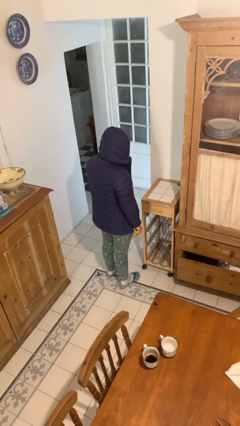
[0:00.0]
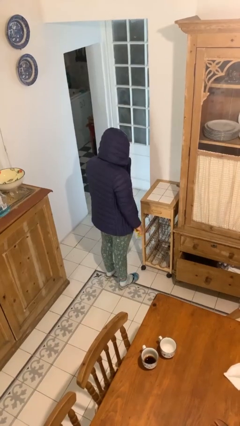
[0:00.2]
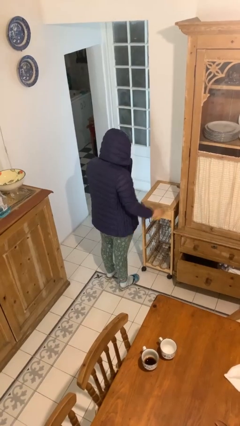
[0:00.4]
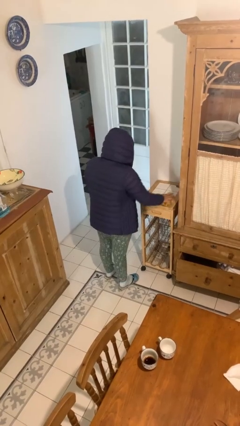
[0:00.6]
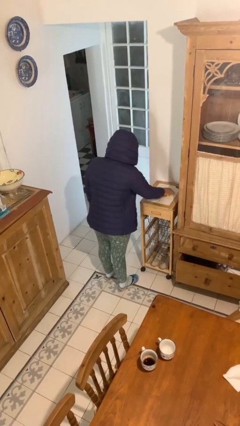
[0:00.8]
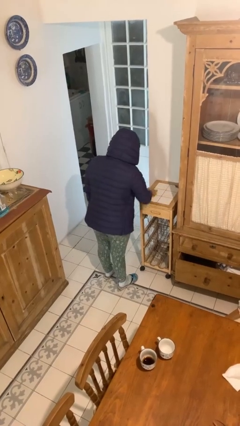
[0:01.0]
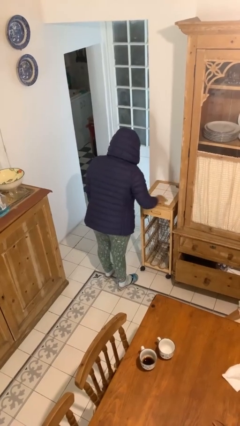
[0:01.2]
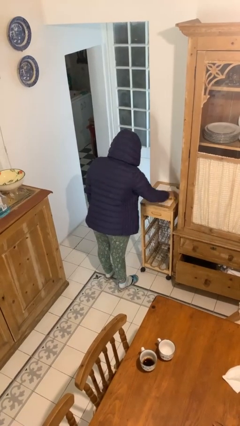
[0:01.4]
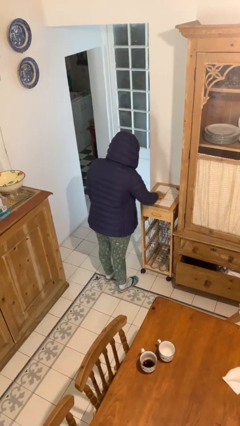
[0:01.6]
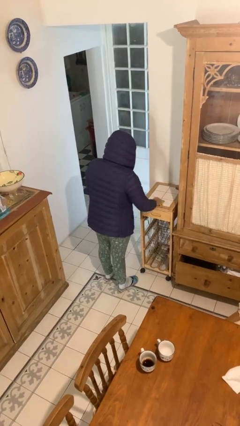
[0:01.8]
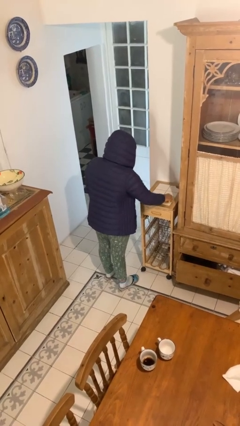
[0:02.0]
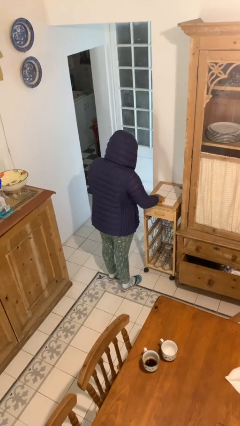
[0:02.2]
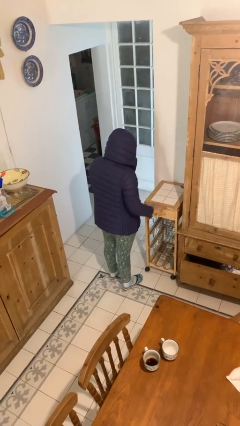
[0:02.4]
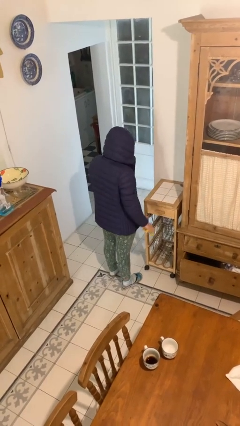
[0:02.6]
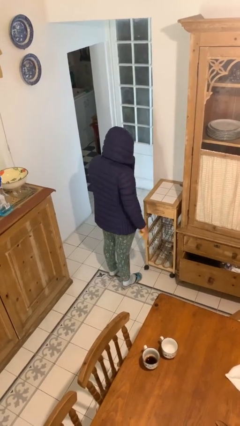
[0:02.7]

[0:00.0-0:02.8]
person cleans table with rag

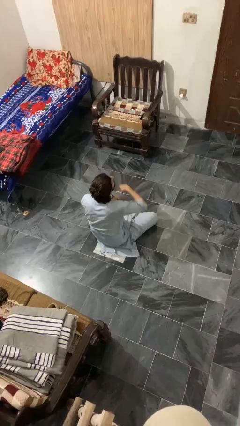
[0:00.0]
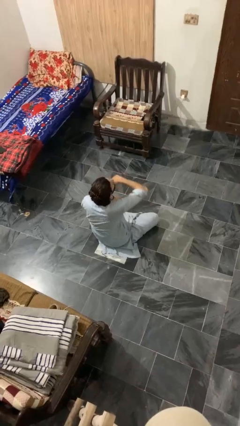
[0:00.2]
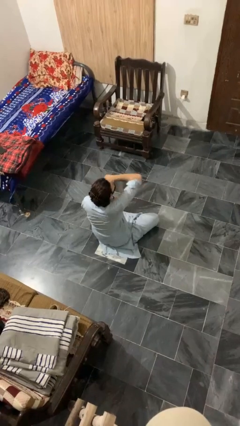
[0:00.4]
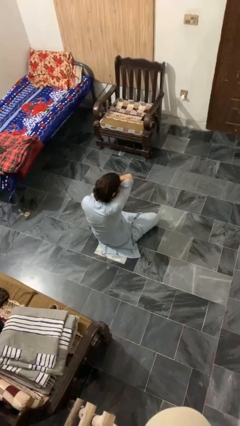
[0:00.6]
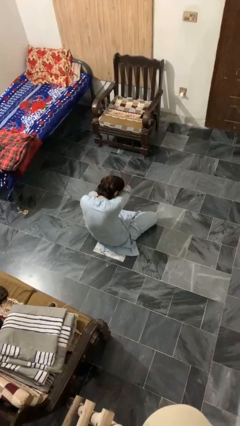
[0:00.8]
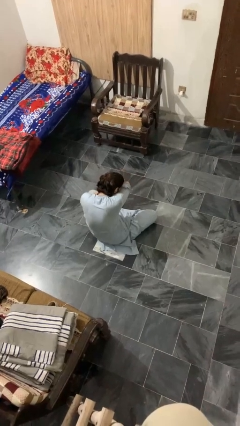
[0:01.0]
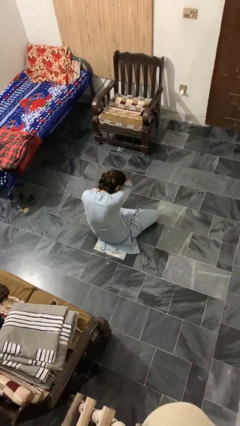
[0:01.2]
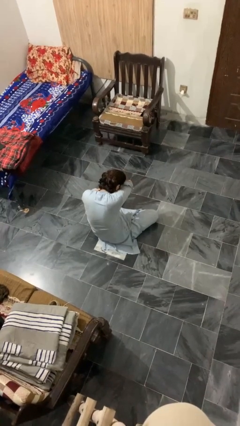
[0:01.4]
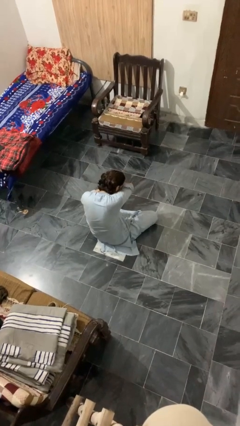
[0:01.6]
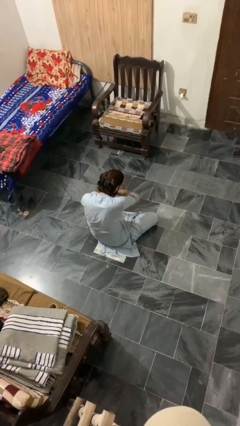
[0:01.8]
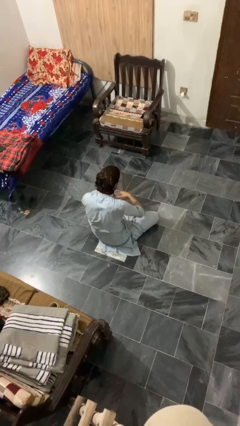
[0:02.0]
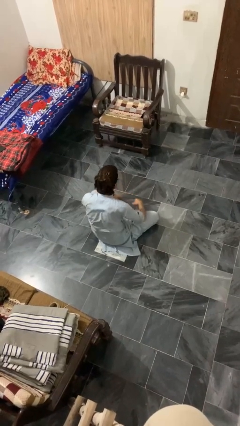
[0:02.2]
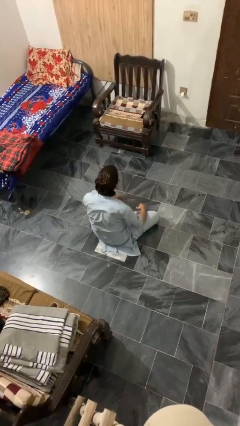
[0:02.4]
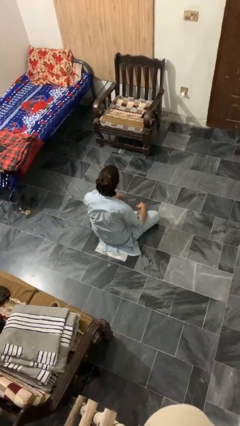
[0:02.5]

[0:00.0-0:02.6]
person sneezes into arm

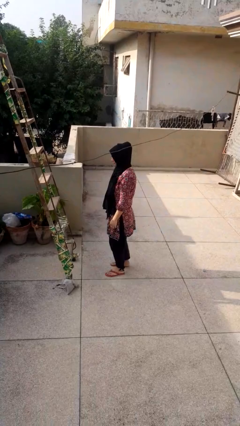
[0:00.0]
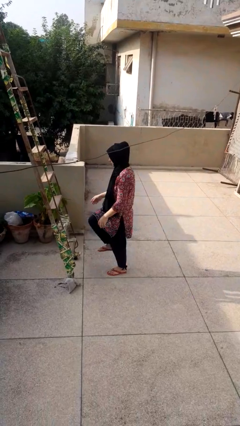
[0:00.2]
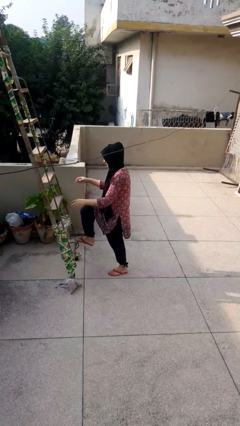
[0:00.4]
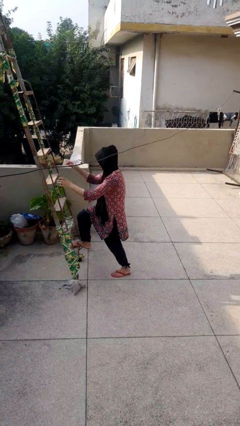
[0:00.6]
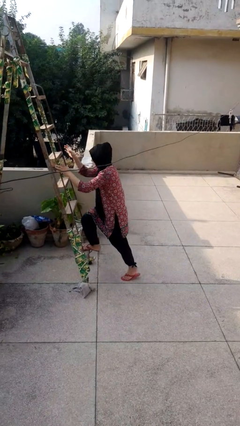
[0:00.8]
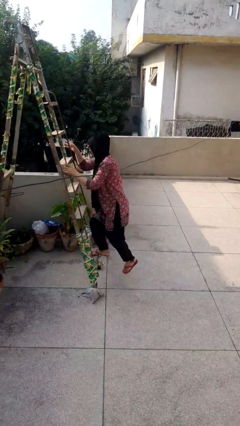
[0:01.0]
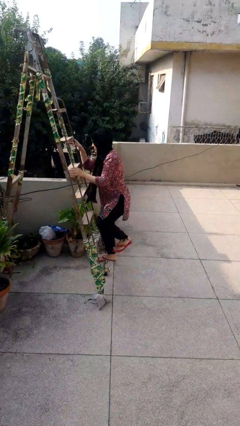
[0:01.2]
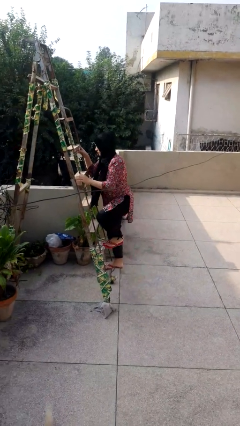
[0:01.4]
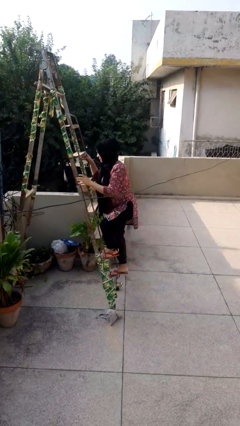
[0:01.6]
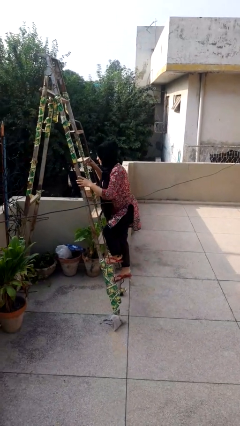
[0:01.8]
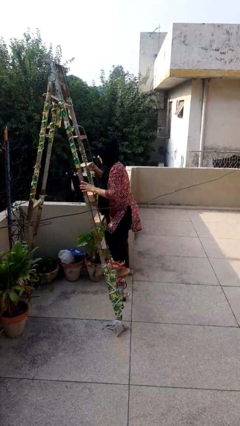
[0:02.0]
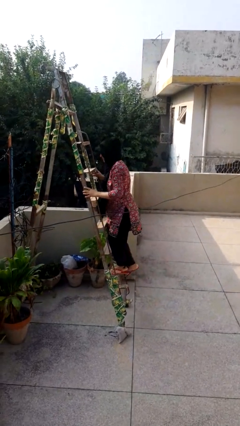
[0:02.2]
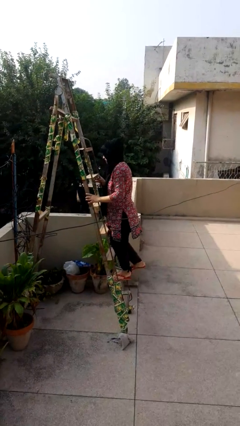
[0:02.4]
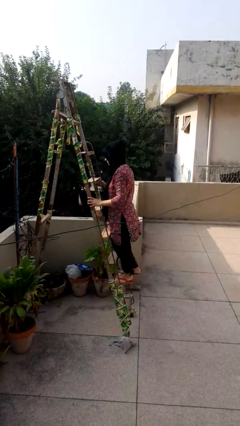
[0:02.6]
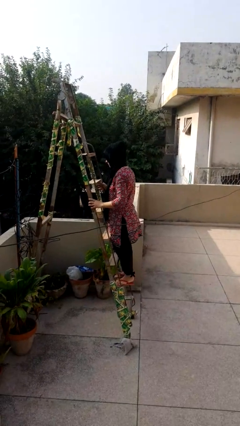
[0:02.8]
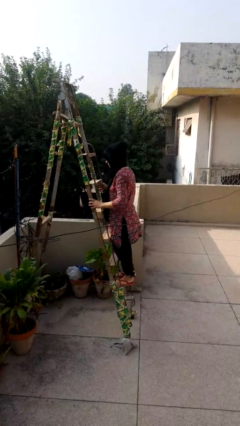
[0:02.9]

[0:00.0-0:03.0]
person climbs up ladder

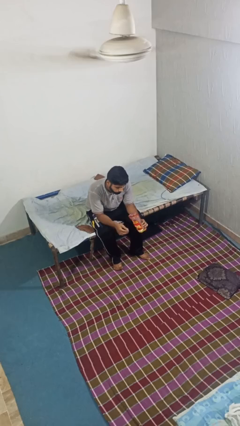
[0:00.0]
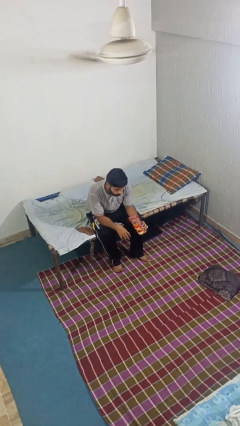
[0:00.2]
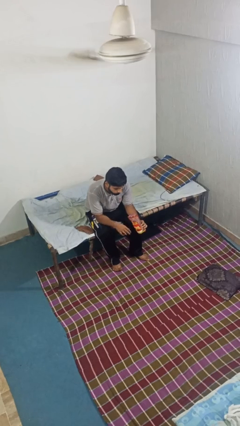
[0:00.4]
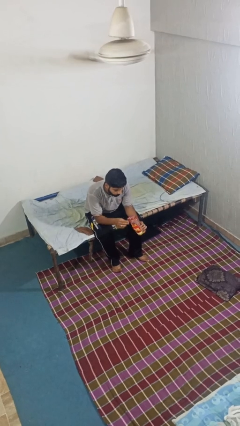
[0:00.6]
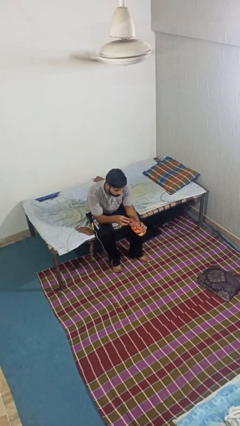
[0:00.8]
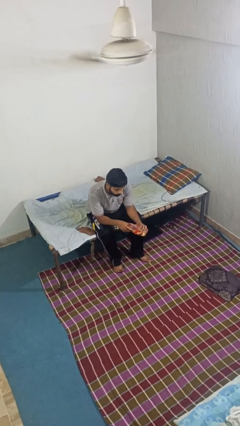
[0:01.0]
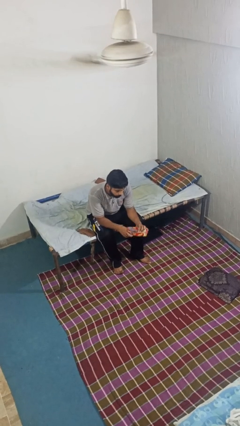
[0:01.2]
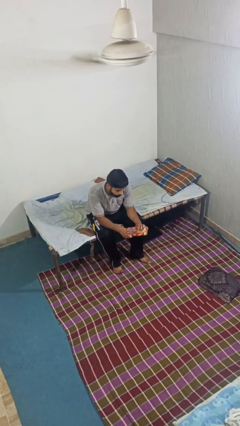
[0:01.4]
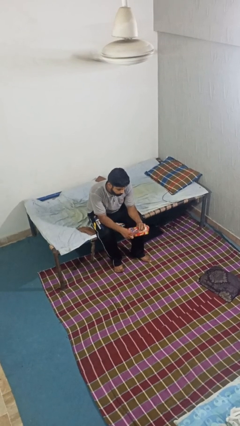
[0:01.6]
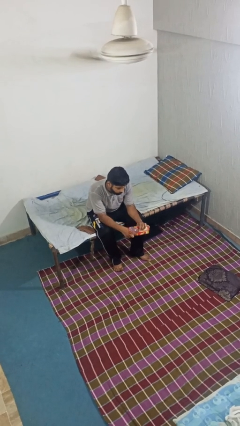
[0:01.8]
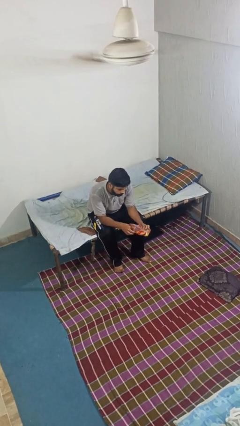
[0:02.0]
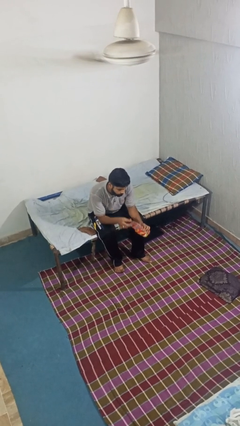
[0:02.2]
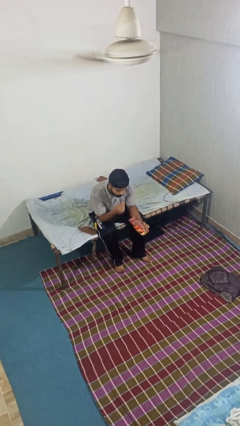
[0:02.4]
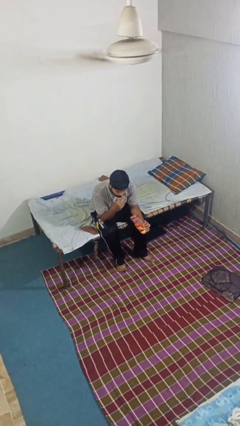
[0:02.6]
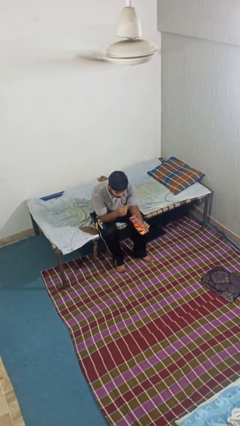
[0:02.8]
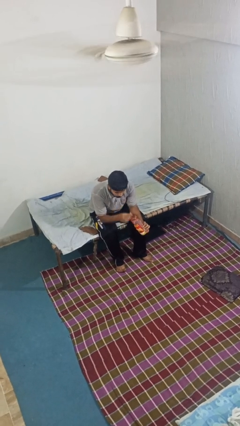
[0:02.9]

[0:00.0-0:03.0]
person eats snack from bag

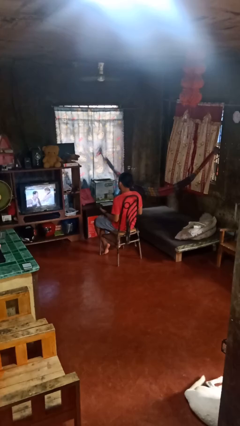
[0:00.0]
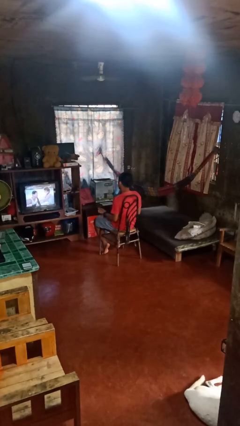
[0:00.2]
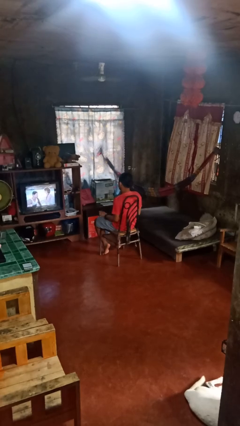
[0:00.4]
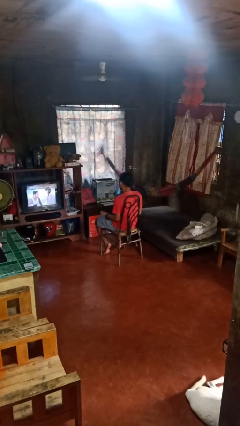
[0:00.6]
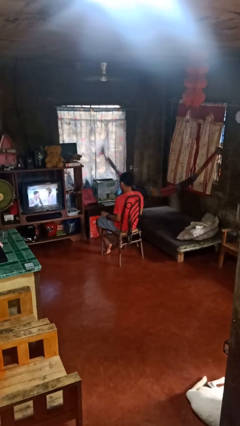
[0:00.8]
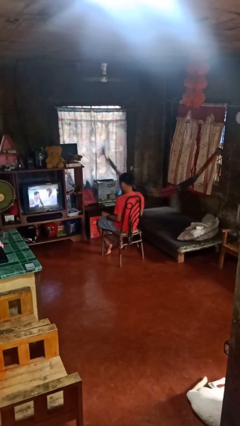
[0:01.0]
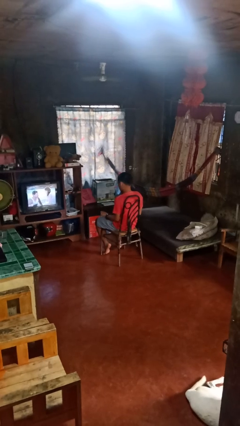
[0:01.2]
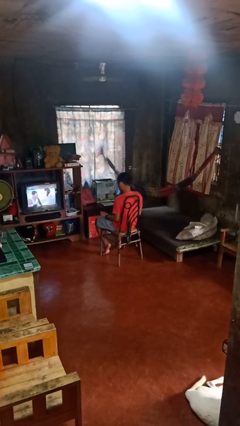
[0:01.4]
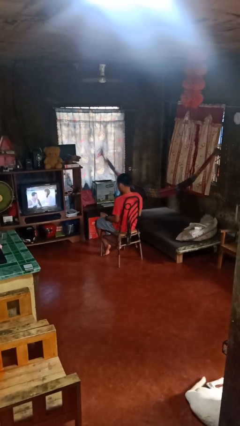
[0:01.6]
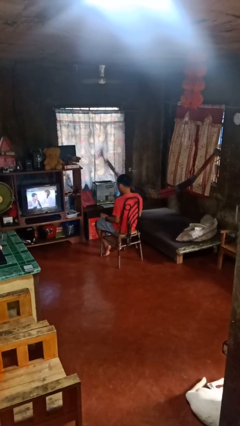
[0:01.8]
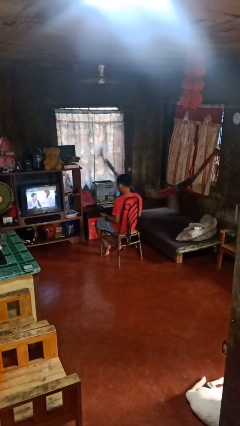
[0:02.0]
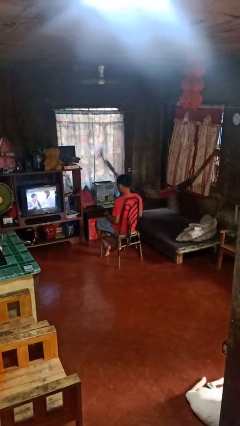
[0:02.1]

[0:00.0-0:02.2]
person looks at hands in lap

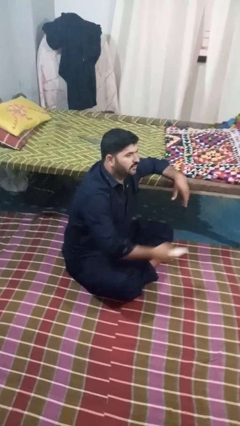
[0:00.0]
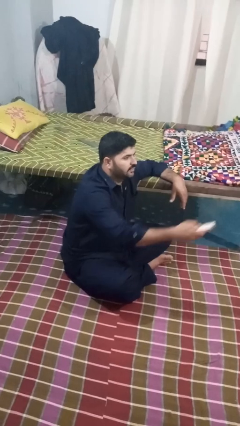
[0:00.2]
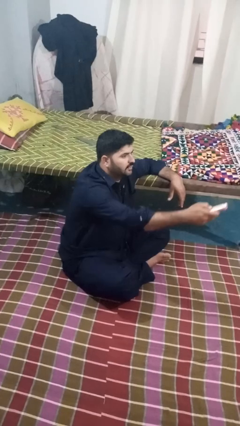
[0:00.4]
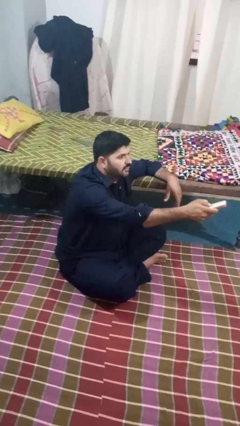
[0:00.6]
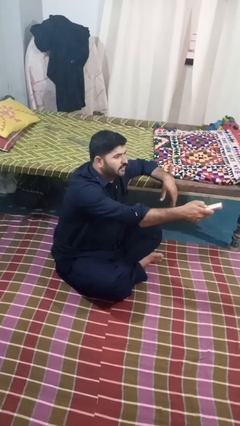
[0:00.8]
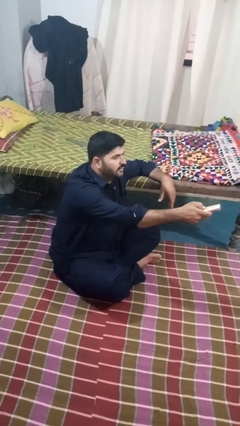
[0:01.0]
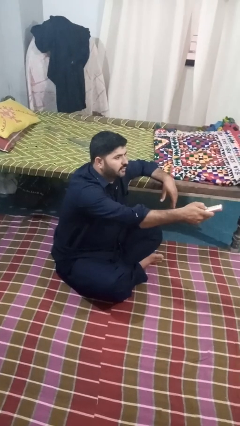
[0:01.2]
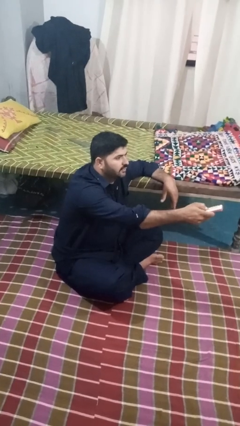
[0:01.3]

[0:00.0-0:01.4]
person uses television remote

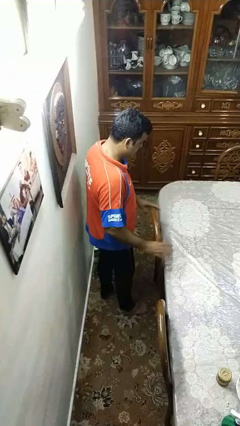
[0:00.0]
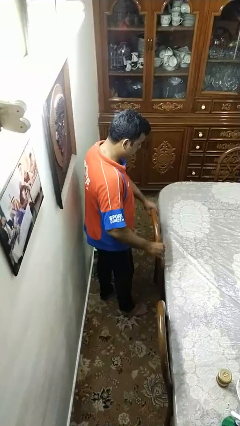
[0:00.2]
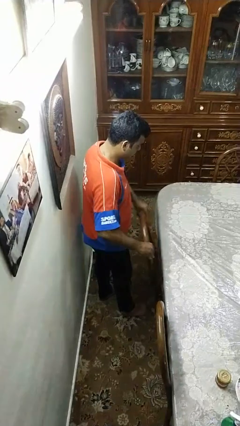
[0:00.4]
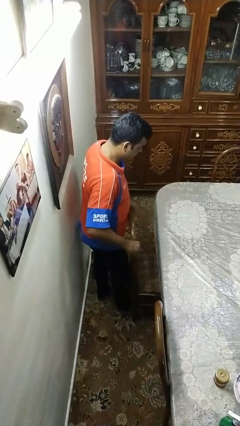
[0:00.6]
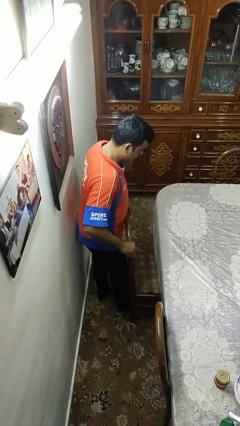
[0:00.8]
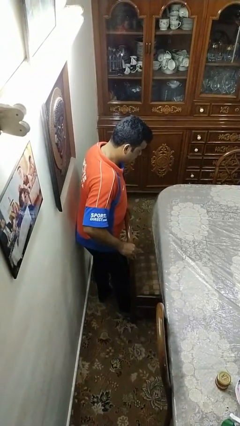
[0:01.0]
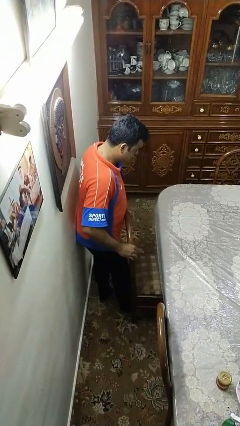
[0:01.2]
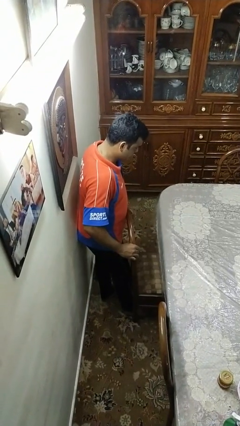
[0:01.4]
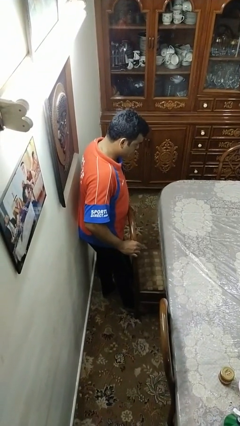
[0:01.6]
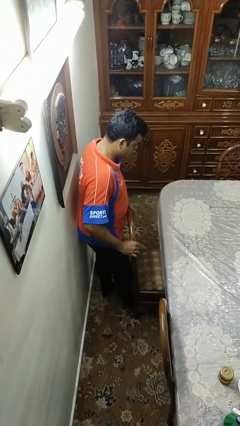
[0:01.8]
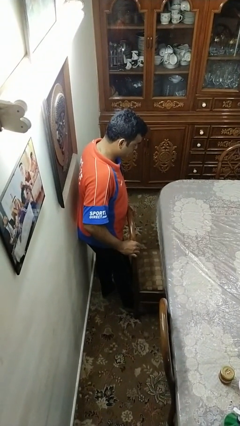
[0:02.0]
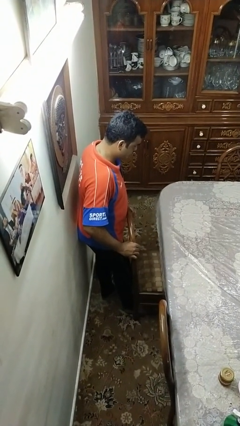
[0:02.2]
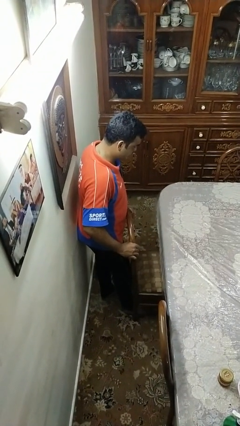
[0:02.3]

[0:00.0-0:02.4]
person pulls out chair
